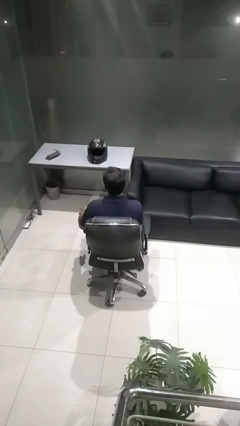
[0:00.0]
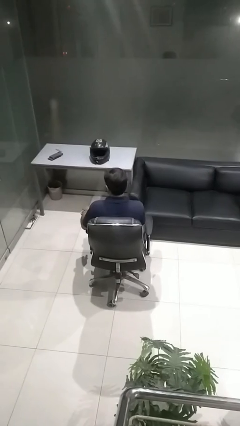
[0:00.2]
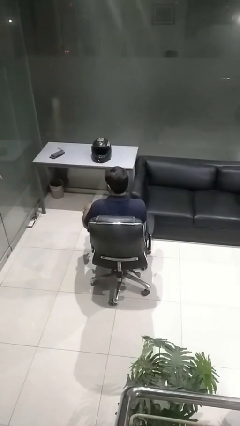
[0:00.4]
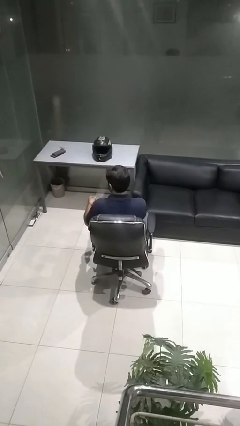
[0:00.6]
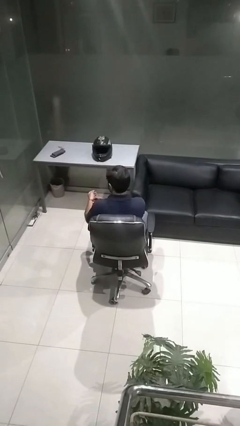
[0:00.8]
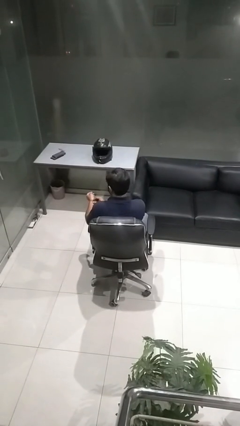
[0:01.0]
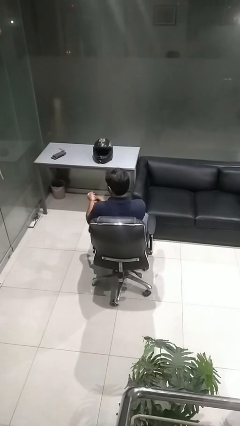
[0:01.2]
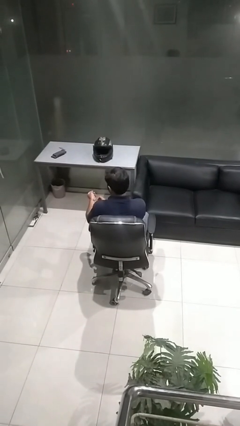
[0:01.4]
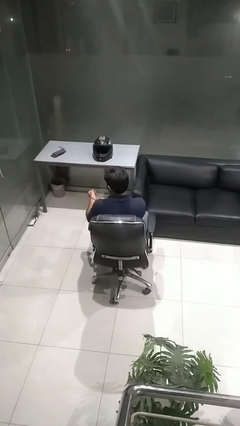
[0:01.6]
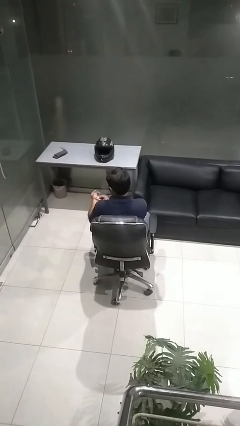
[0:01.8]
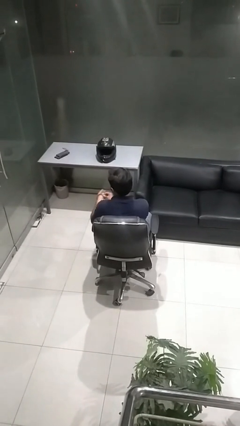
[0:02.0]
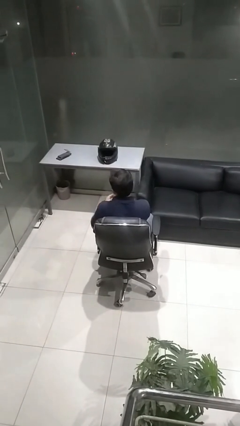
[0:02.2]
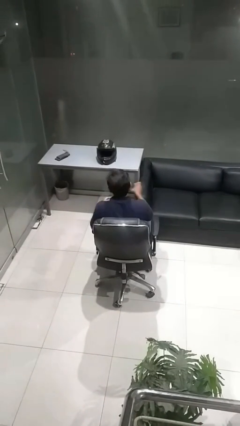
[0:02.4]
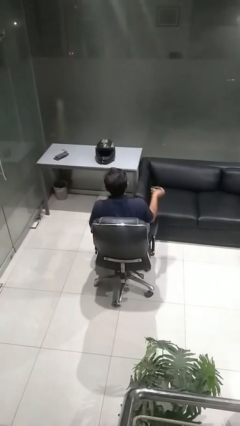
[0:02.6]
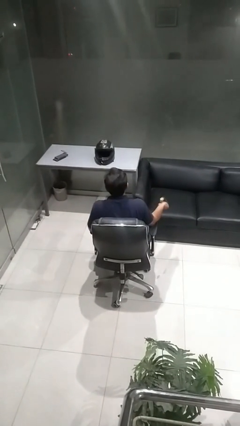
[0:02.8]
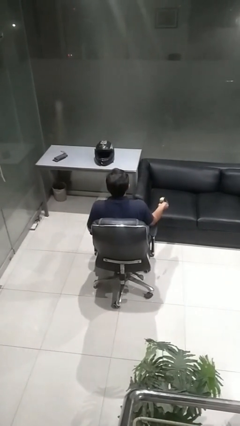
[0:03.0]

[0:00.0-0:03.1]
person takes off wristwatch

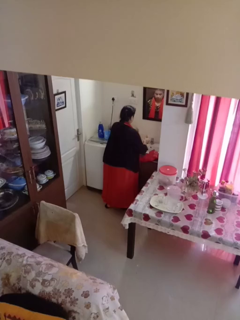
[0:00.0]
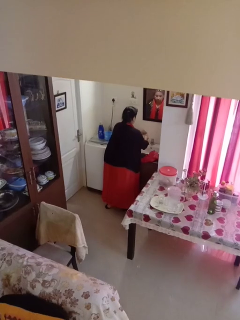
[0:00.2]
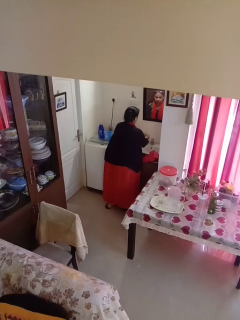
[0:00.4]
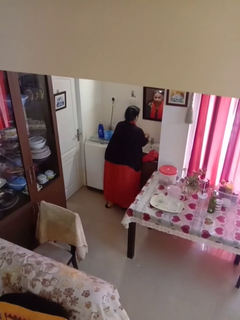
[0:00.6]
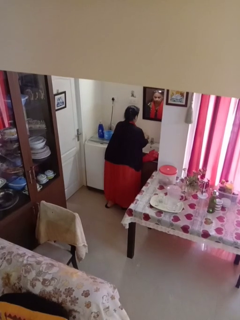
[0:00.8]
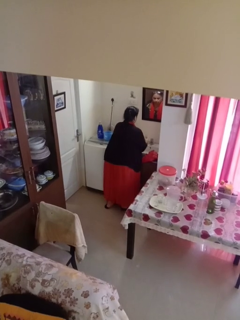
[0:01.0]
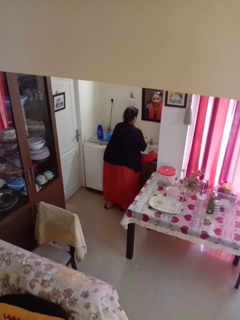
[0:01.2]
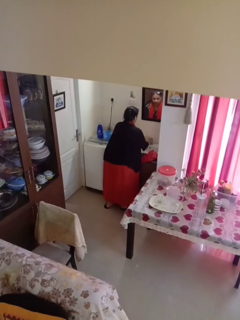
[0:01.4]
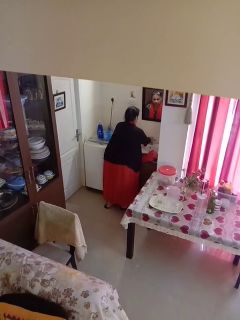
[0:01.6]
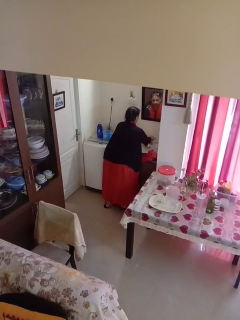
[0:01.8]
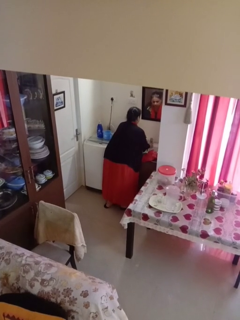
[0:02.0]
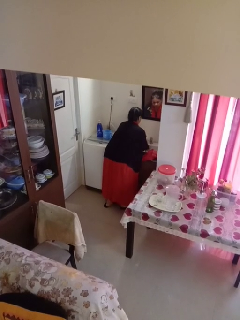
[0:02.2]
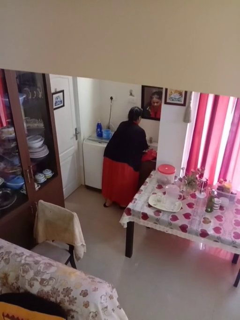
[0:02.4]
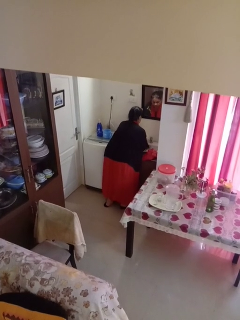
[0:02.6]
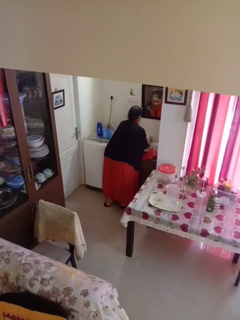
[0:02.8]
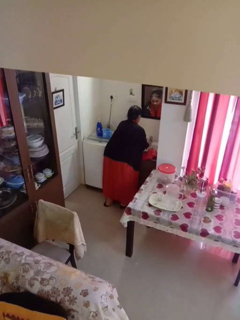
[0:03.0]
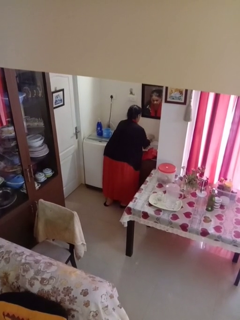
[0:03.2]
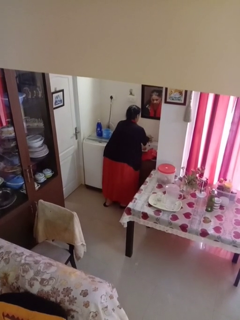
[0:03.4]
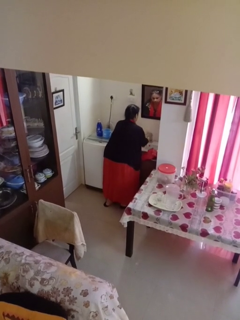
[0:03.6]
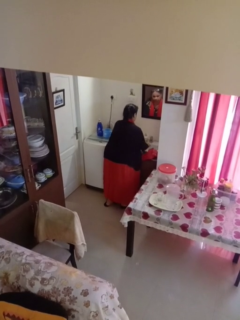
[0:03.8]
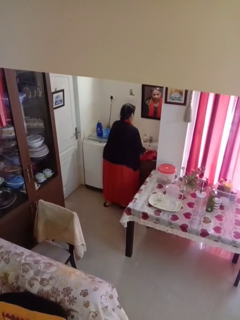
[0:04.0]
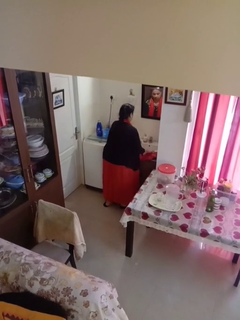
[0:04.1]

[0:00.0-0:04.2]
person washes hands

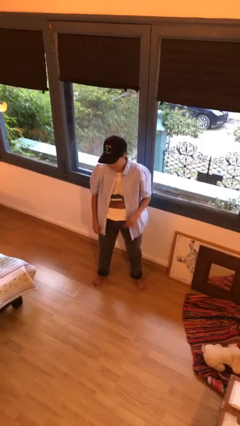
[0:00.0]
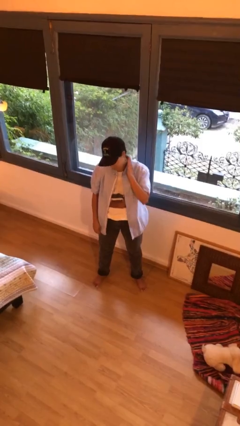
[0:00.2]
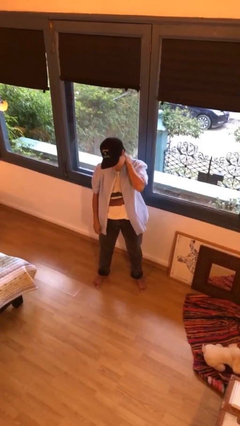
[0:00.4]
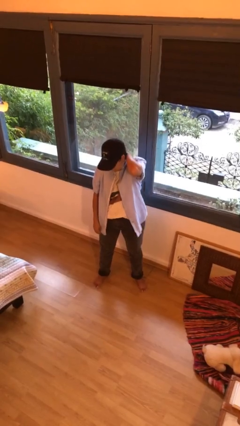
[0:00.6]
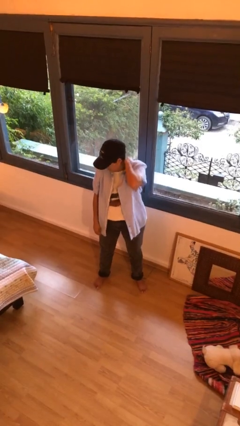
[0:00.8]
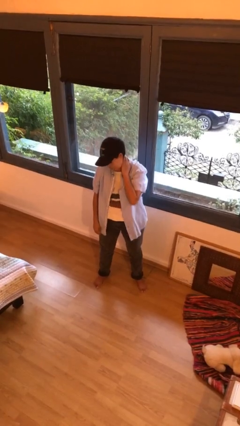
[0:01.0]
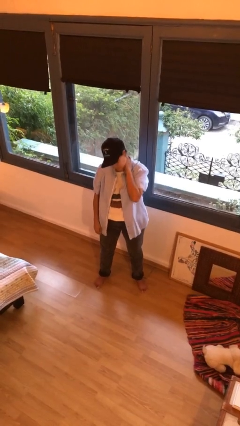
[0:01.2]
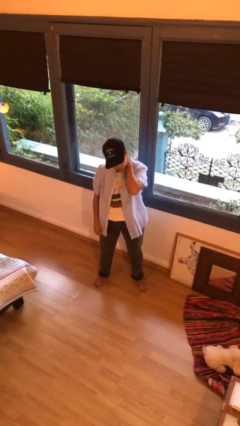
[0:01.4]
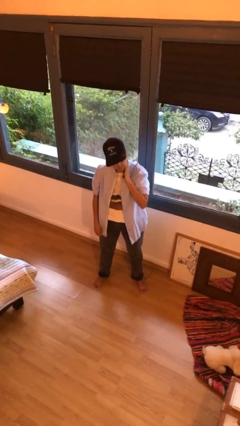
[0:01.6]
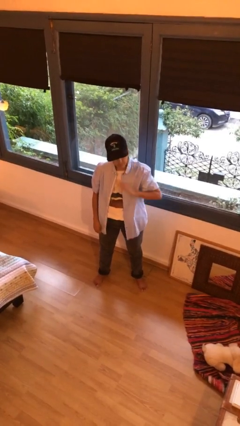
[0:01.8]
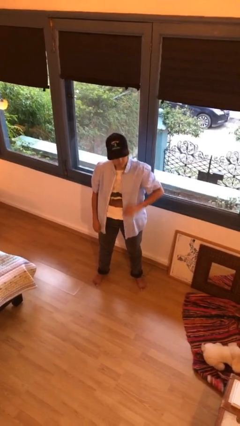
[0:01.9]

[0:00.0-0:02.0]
person rubs neck

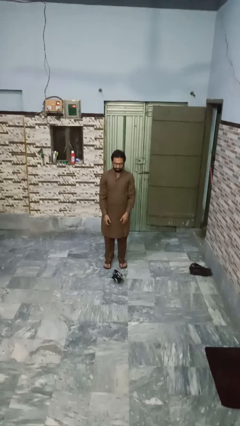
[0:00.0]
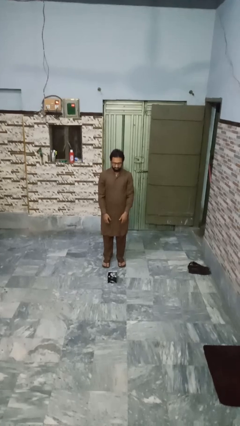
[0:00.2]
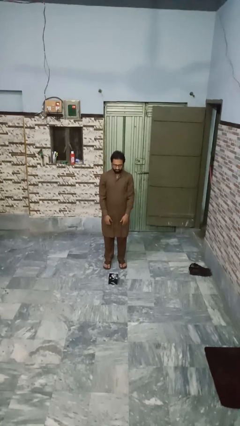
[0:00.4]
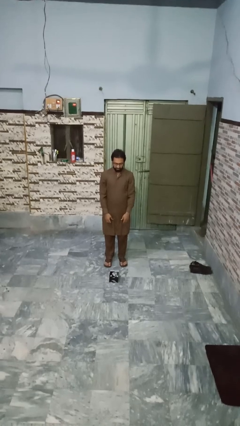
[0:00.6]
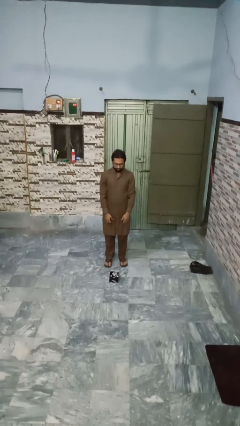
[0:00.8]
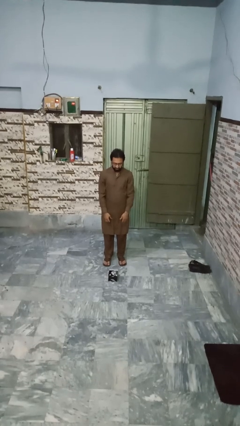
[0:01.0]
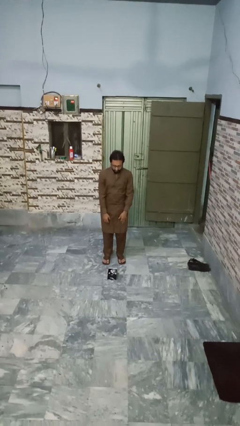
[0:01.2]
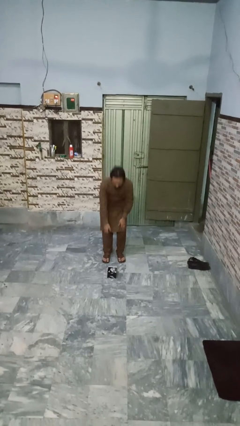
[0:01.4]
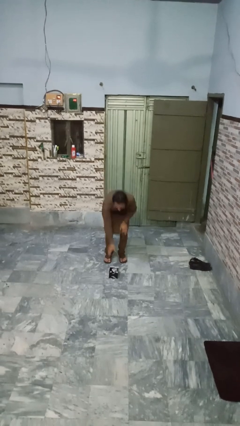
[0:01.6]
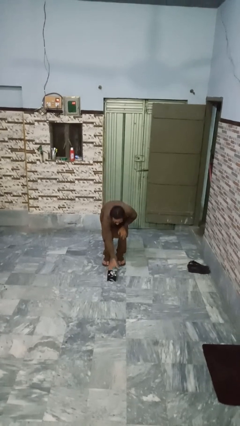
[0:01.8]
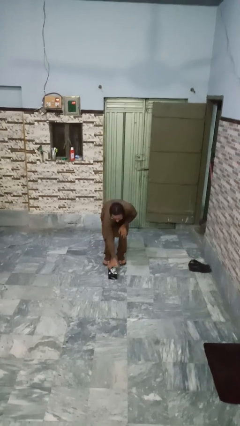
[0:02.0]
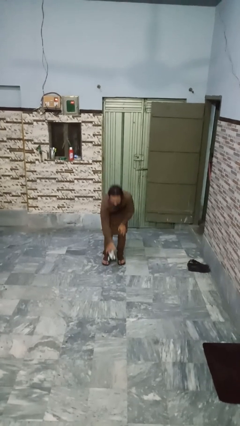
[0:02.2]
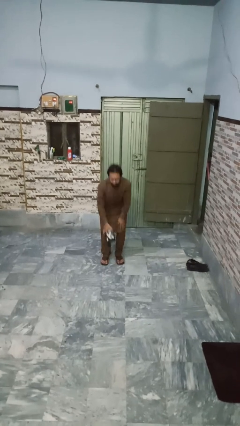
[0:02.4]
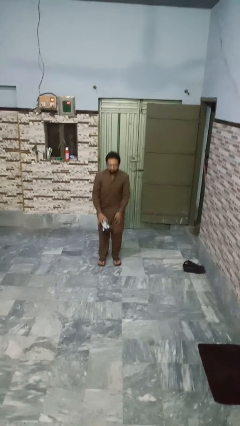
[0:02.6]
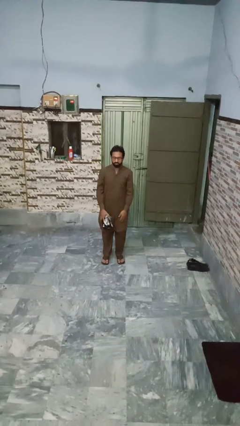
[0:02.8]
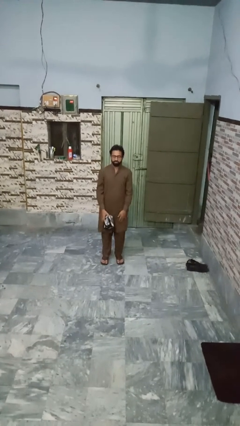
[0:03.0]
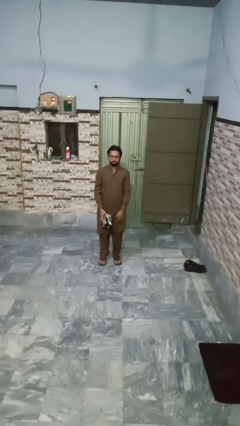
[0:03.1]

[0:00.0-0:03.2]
person picks up object from floor

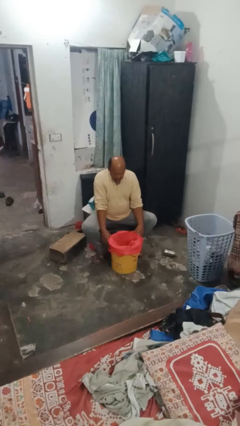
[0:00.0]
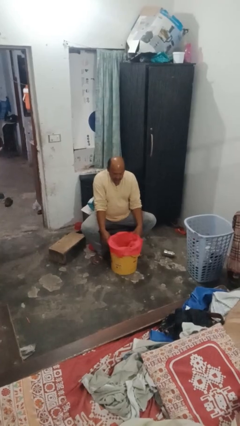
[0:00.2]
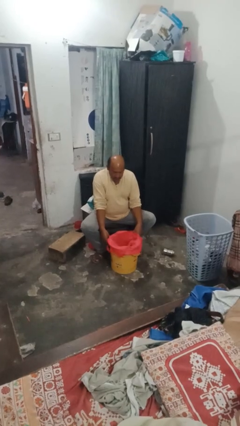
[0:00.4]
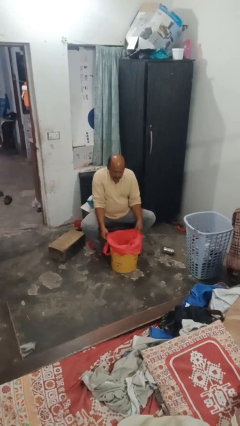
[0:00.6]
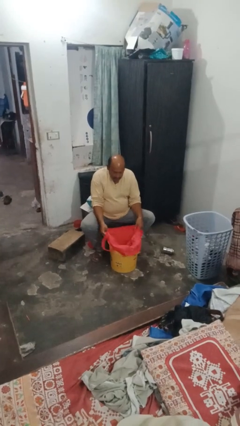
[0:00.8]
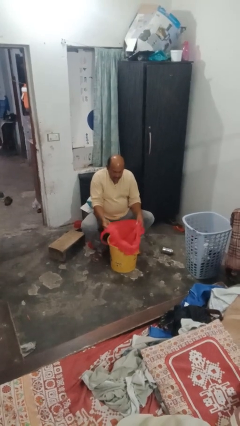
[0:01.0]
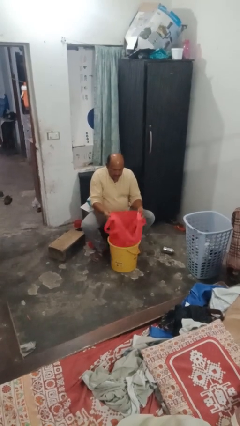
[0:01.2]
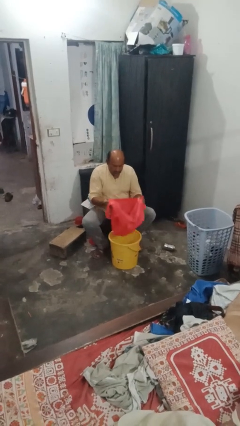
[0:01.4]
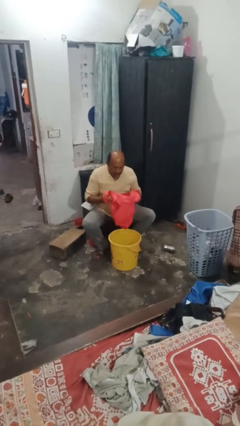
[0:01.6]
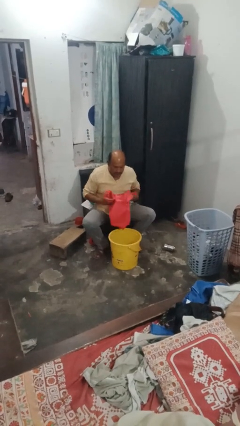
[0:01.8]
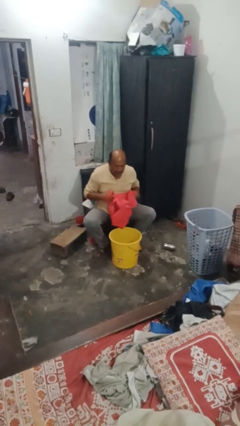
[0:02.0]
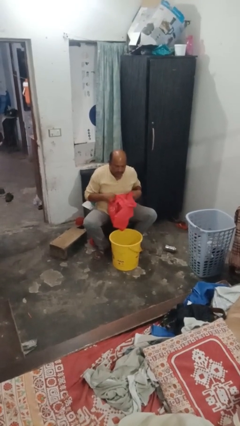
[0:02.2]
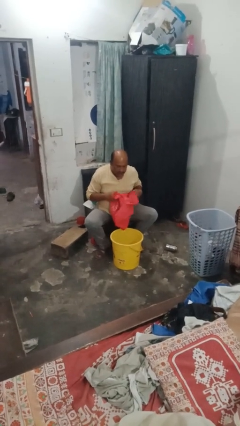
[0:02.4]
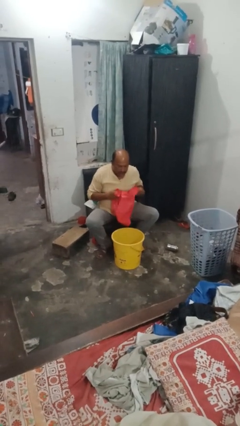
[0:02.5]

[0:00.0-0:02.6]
person removes trashbag from trashcan

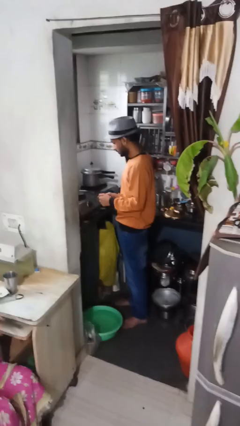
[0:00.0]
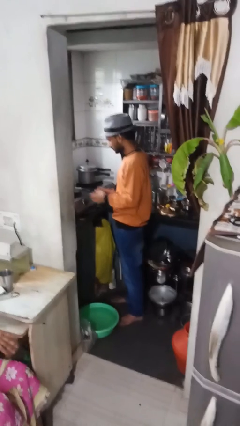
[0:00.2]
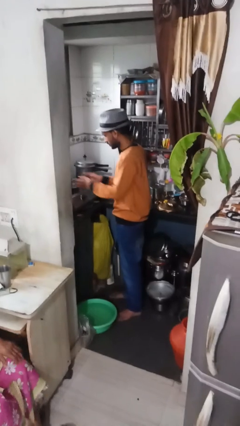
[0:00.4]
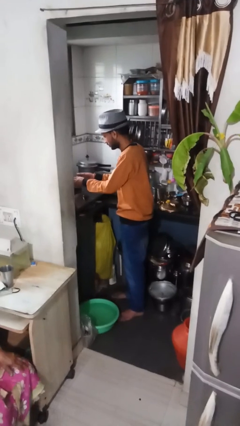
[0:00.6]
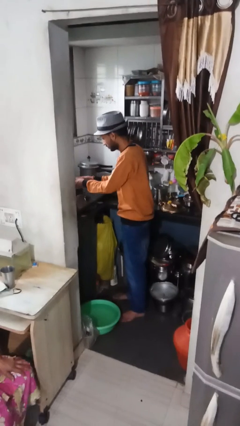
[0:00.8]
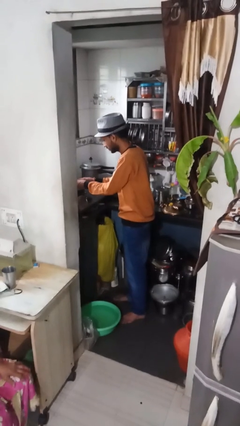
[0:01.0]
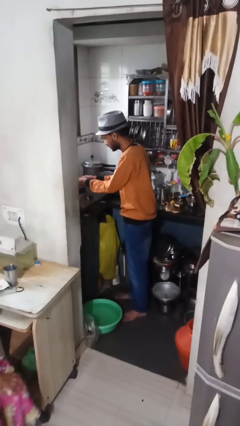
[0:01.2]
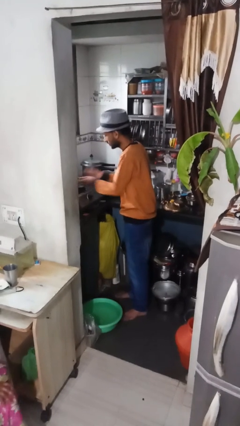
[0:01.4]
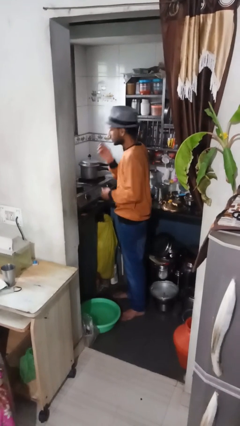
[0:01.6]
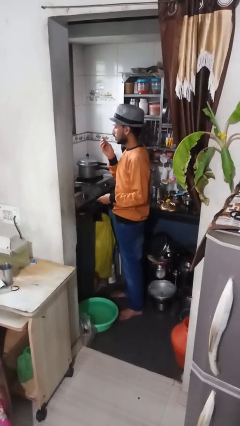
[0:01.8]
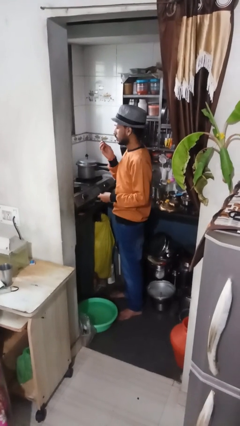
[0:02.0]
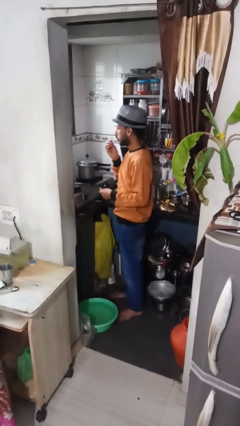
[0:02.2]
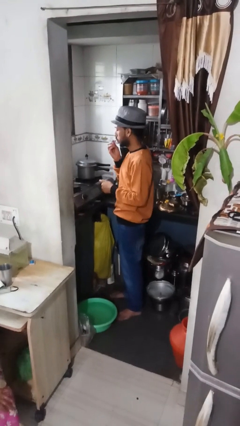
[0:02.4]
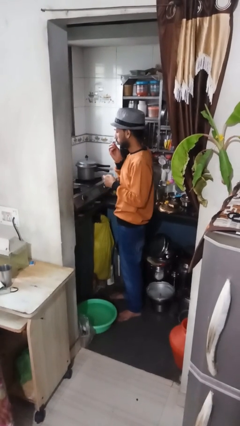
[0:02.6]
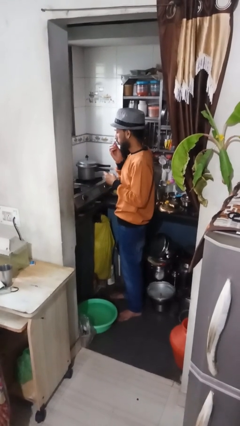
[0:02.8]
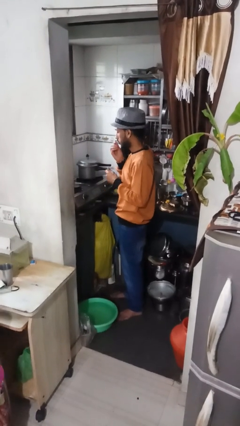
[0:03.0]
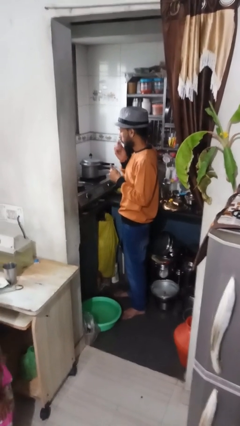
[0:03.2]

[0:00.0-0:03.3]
person burns hand
